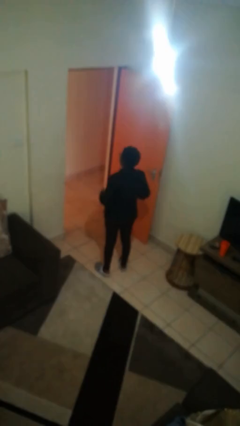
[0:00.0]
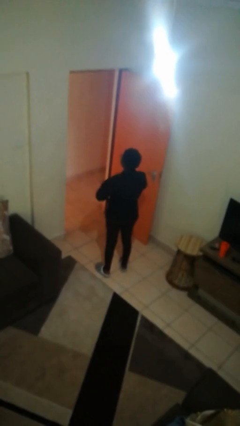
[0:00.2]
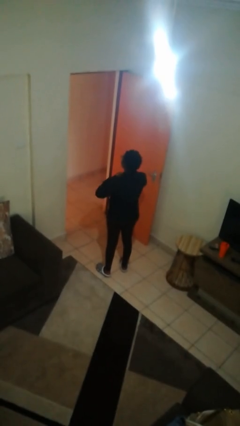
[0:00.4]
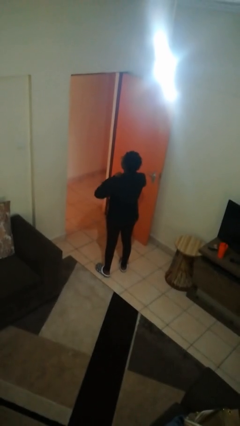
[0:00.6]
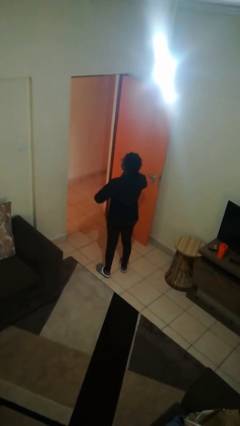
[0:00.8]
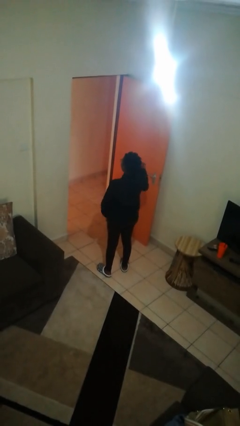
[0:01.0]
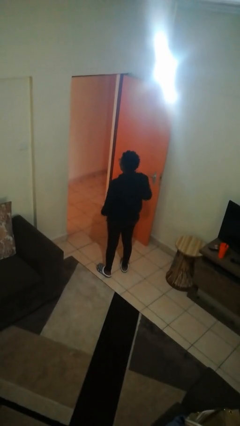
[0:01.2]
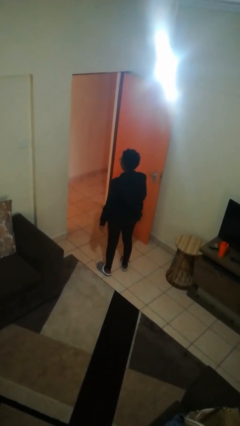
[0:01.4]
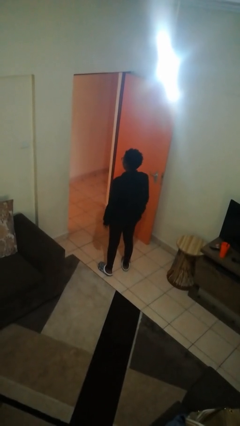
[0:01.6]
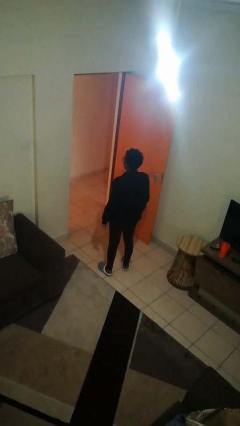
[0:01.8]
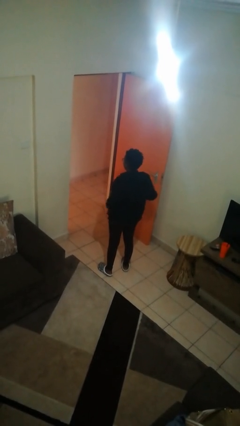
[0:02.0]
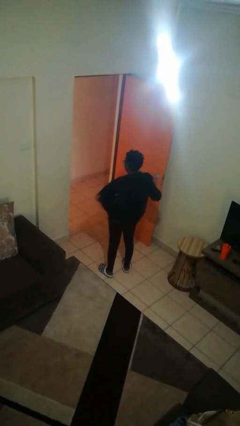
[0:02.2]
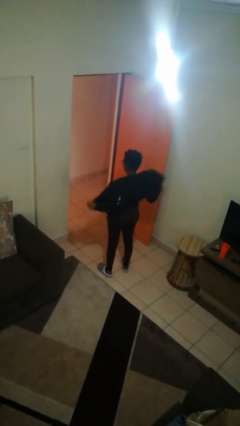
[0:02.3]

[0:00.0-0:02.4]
person unzips jacket

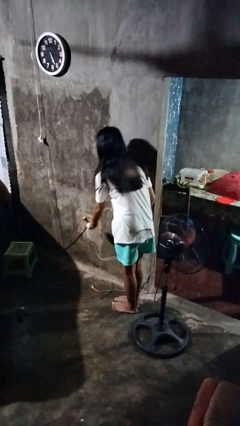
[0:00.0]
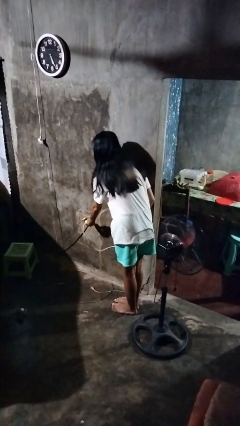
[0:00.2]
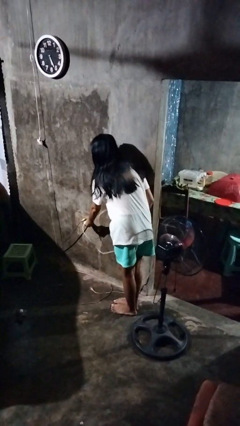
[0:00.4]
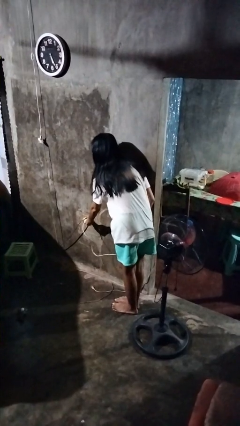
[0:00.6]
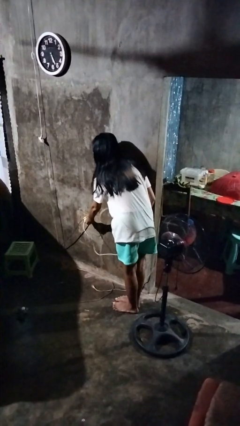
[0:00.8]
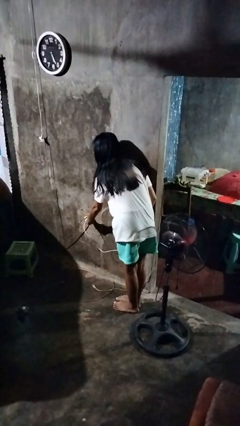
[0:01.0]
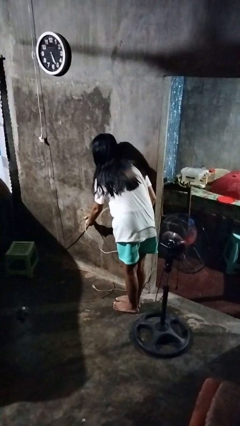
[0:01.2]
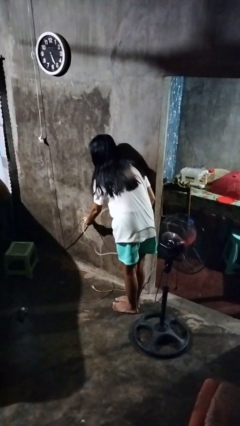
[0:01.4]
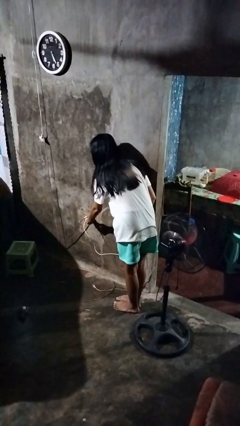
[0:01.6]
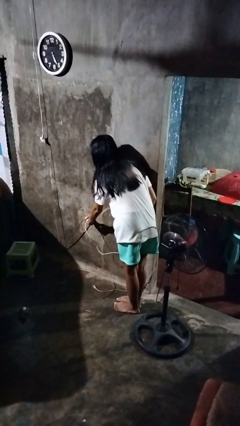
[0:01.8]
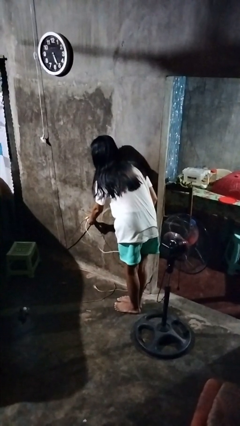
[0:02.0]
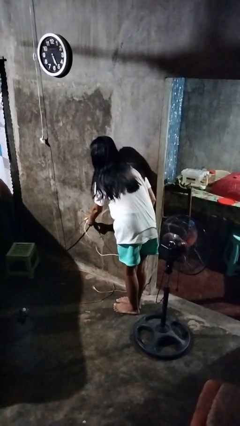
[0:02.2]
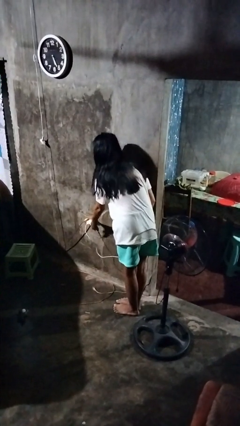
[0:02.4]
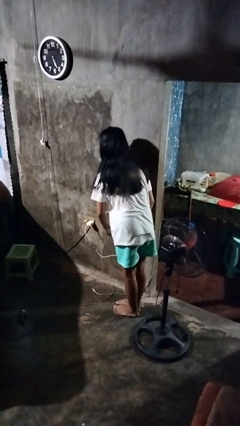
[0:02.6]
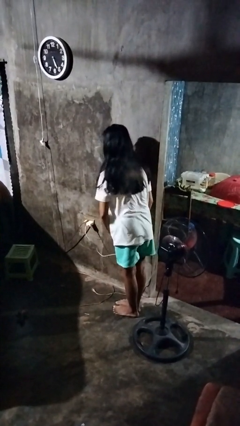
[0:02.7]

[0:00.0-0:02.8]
person plugs into electrical socket

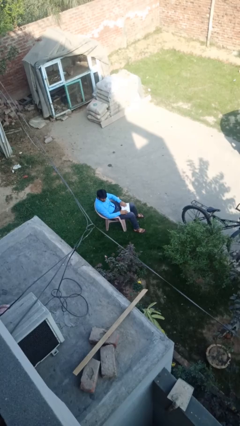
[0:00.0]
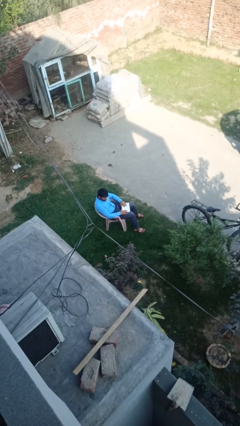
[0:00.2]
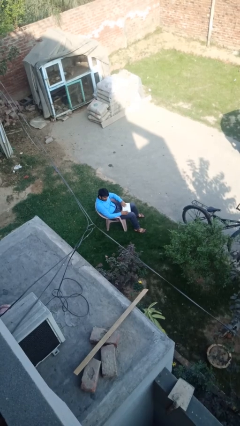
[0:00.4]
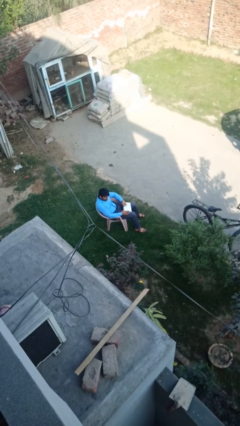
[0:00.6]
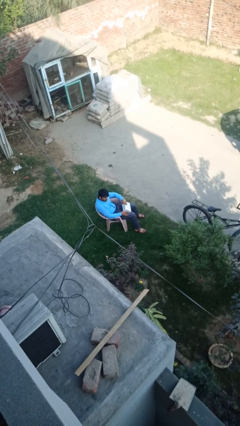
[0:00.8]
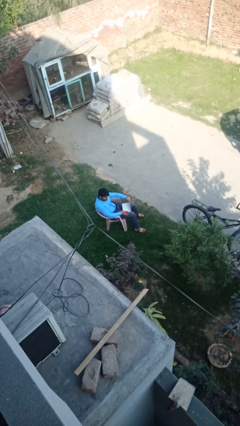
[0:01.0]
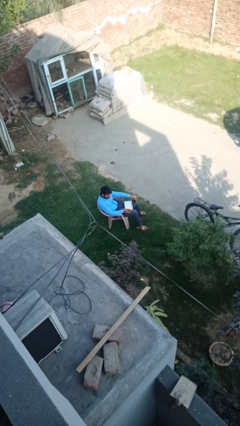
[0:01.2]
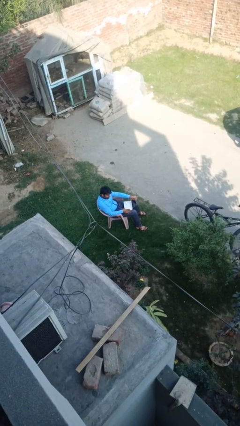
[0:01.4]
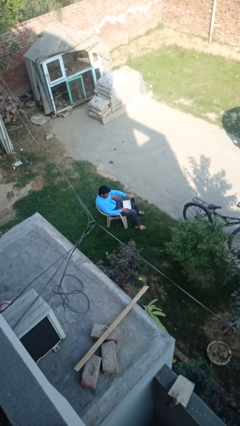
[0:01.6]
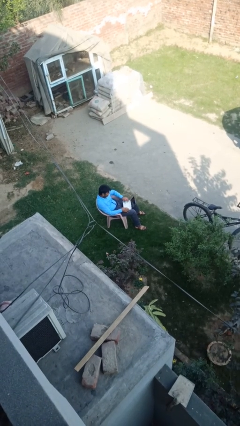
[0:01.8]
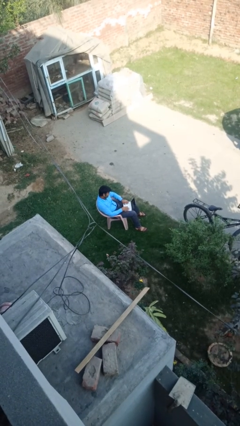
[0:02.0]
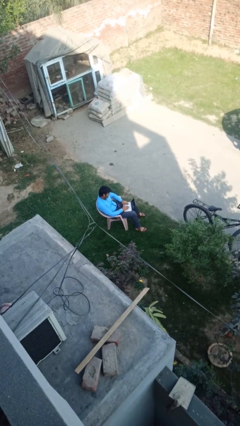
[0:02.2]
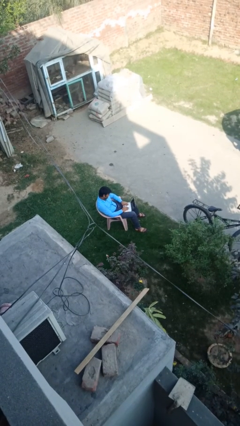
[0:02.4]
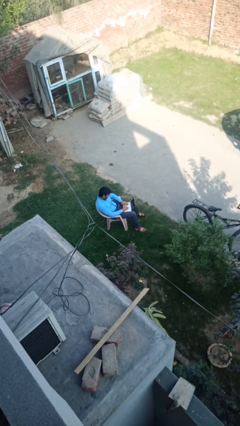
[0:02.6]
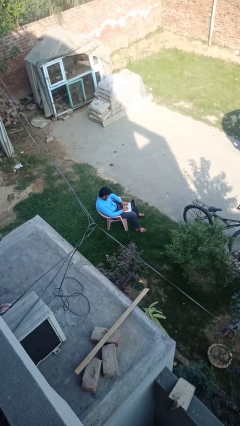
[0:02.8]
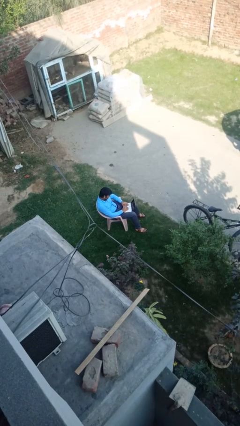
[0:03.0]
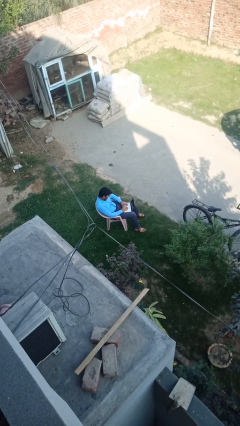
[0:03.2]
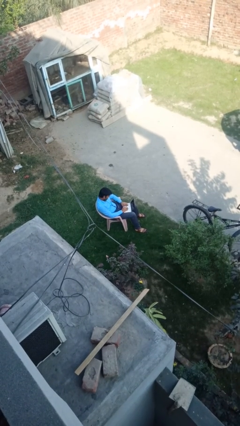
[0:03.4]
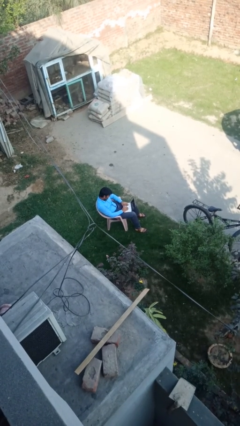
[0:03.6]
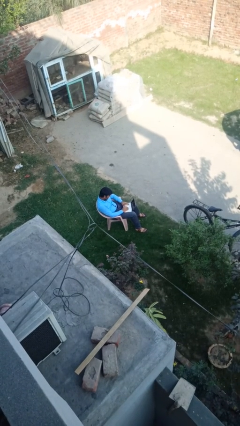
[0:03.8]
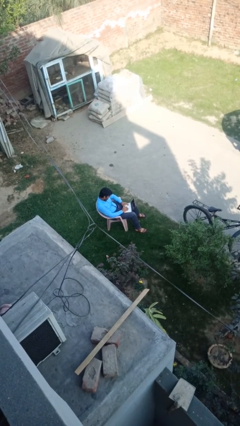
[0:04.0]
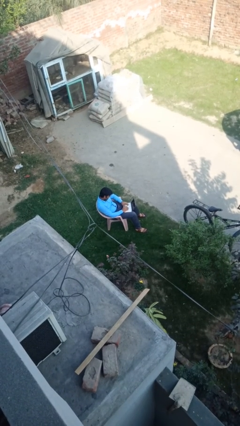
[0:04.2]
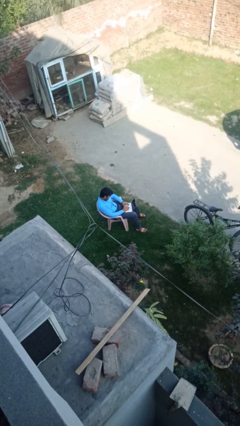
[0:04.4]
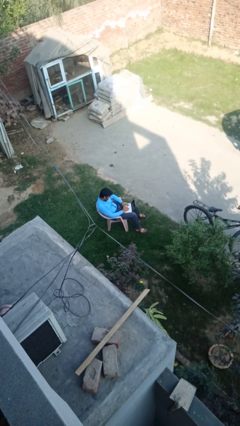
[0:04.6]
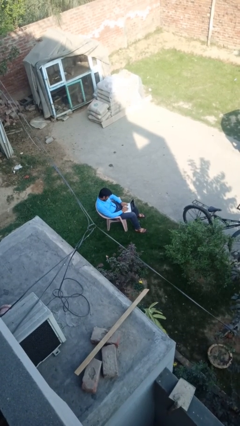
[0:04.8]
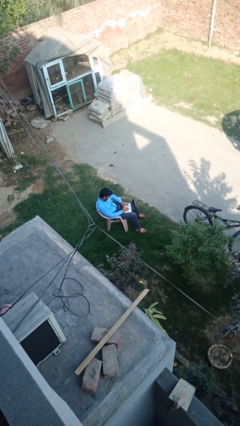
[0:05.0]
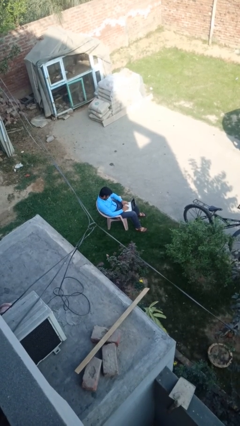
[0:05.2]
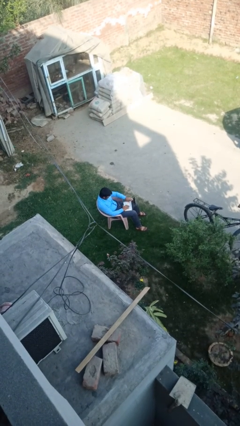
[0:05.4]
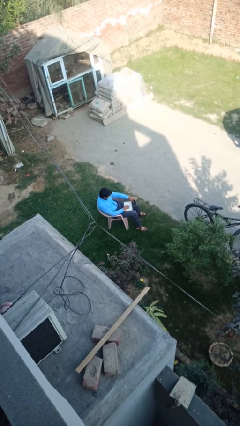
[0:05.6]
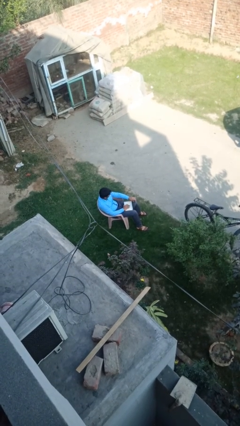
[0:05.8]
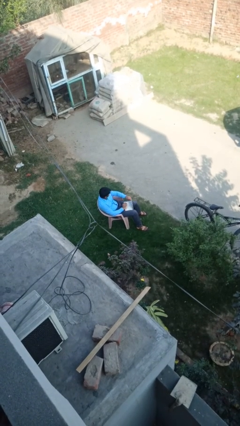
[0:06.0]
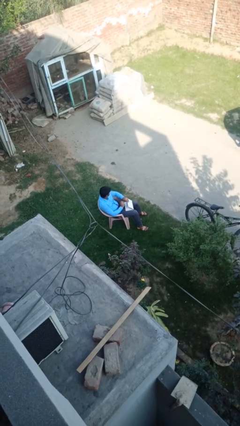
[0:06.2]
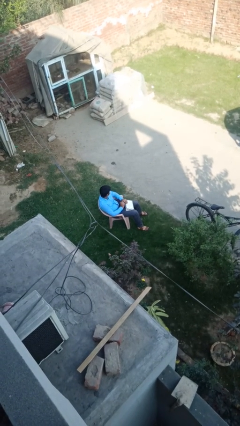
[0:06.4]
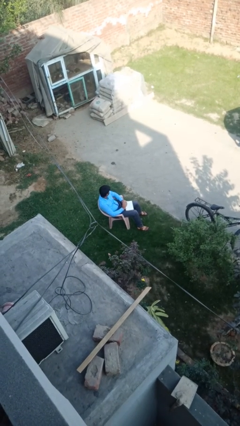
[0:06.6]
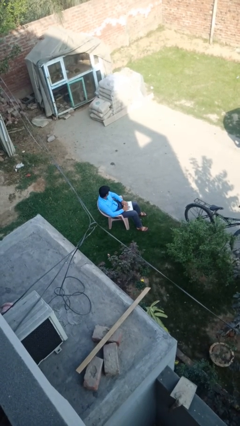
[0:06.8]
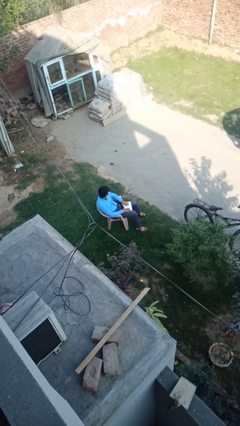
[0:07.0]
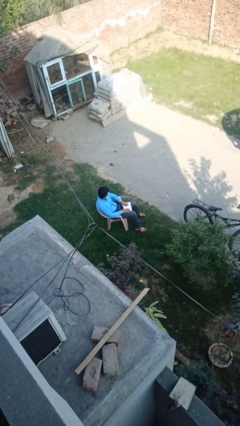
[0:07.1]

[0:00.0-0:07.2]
person interacts with laptop

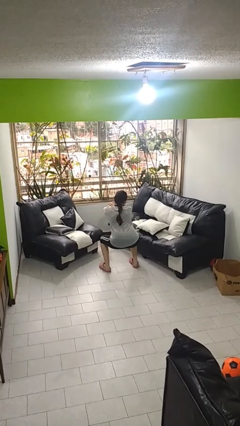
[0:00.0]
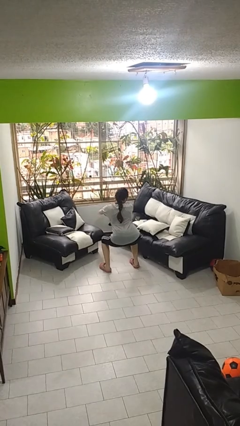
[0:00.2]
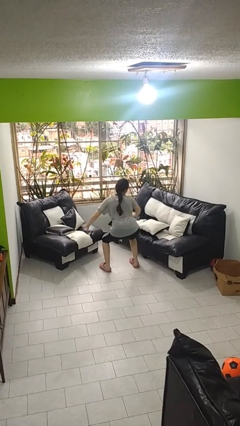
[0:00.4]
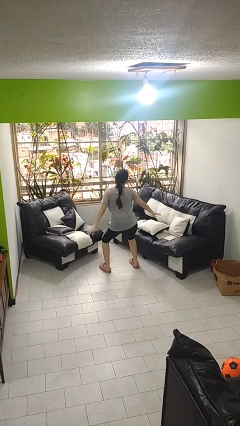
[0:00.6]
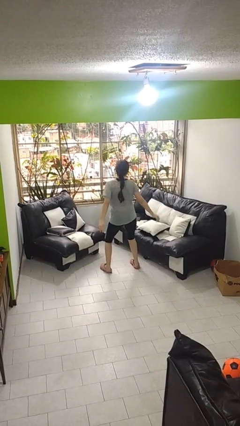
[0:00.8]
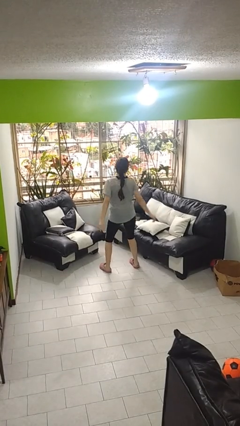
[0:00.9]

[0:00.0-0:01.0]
person stands up

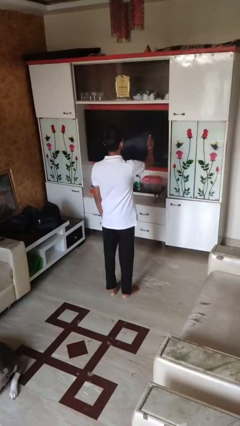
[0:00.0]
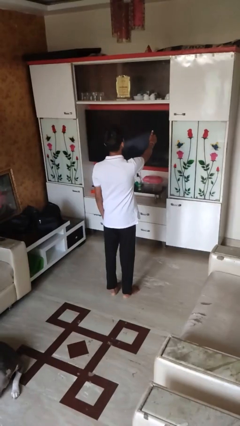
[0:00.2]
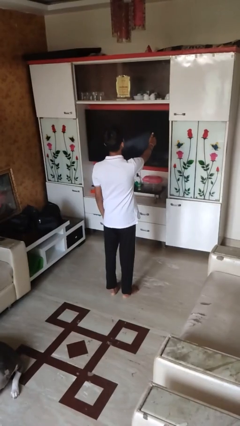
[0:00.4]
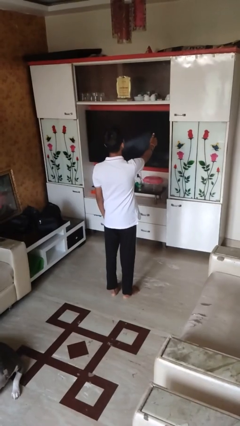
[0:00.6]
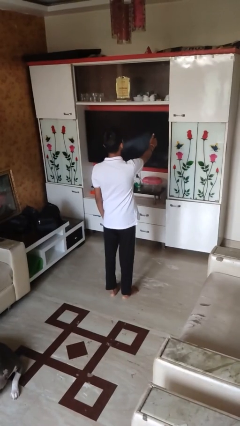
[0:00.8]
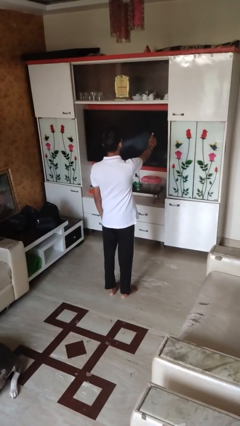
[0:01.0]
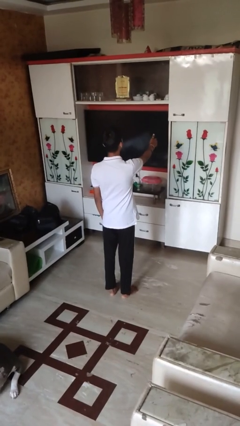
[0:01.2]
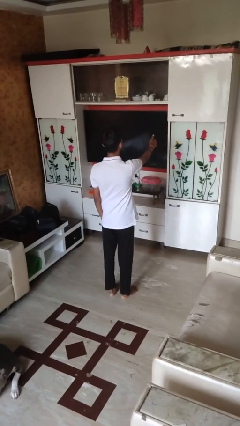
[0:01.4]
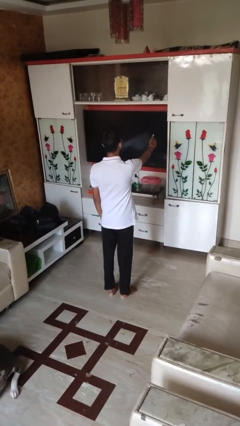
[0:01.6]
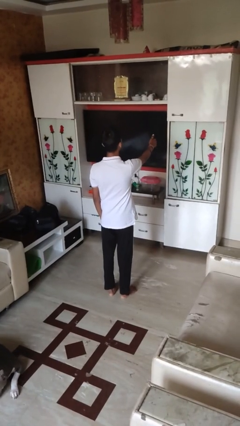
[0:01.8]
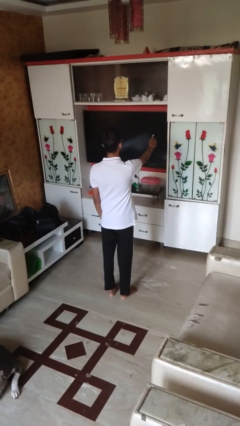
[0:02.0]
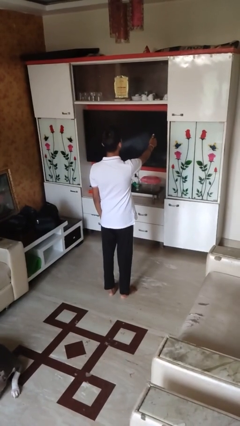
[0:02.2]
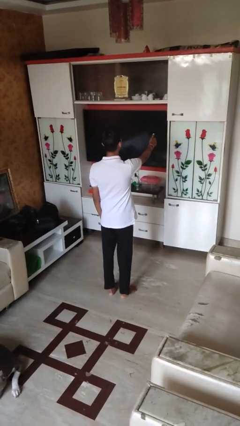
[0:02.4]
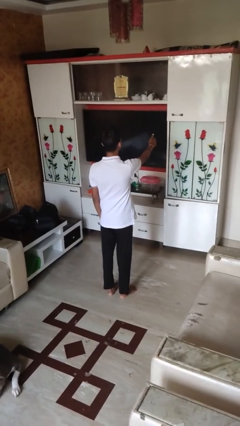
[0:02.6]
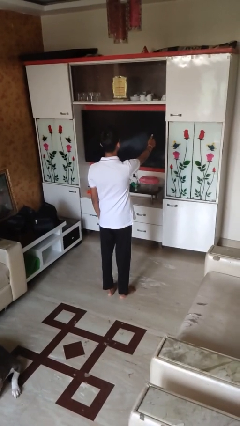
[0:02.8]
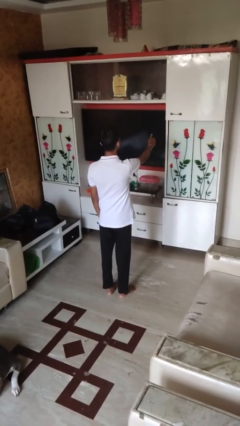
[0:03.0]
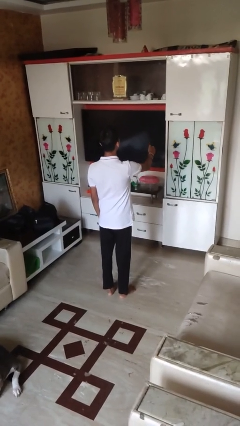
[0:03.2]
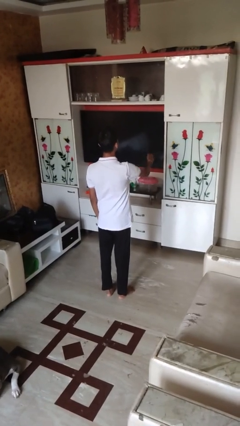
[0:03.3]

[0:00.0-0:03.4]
person gestures thumbs up

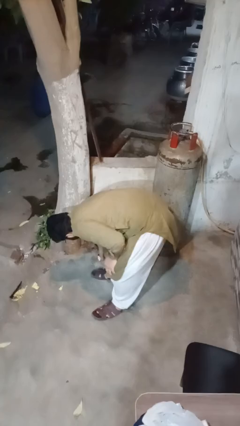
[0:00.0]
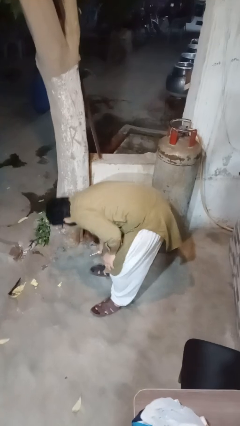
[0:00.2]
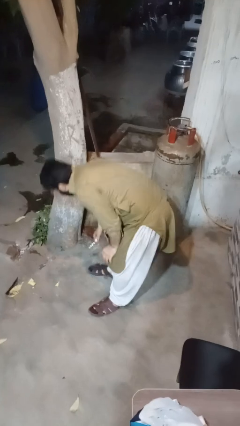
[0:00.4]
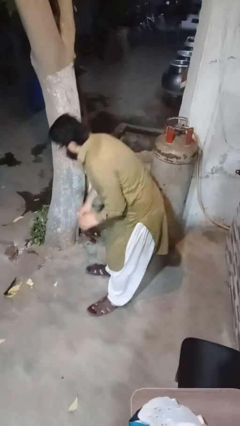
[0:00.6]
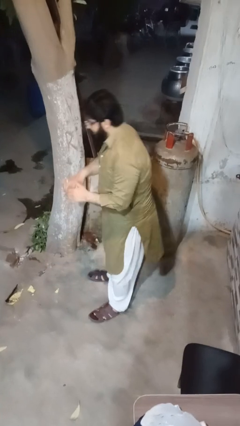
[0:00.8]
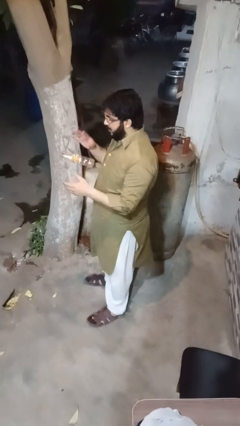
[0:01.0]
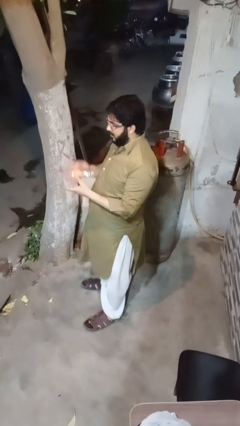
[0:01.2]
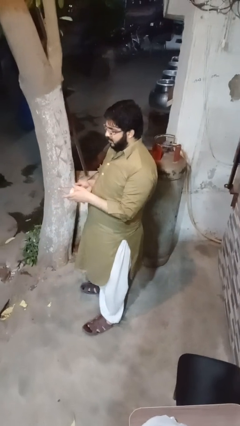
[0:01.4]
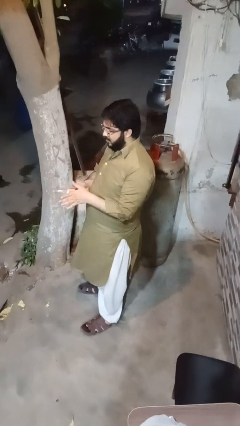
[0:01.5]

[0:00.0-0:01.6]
person picks up object from floor
